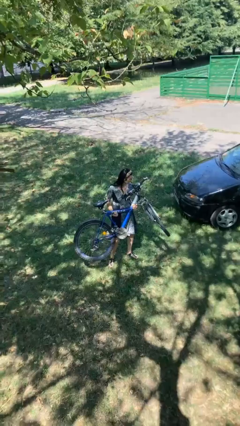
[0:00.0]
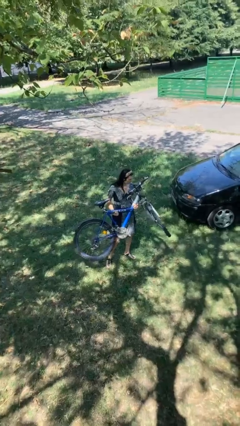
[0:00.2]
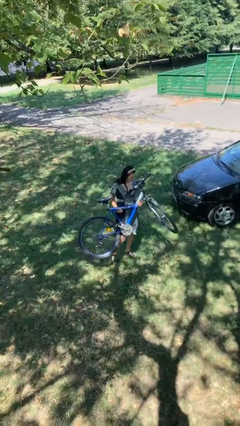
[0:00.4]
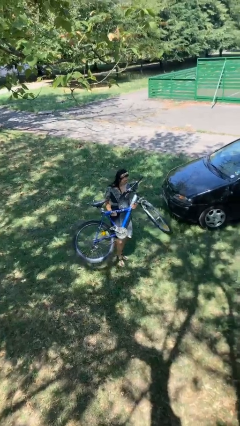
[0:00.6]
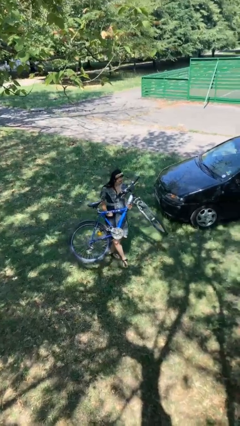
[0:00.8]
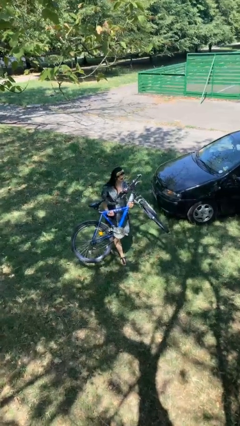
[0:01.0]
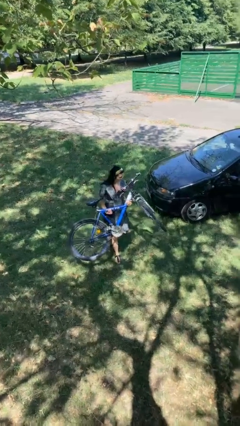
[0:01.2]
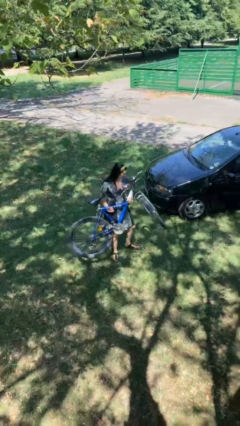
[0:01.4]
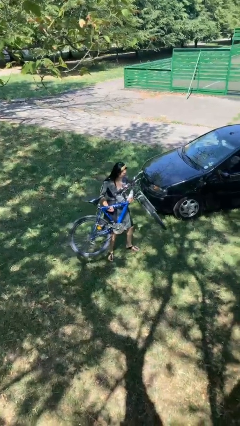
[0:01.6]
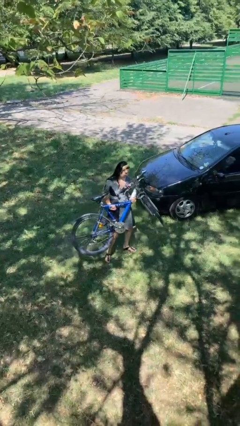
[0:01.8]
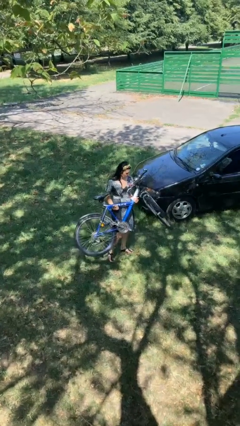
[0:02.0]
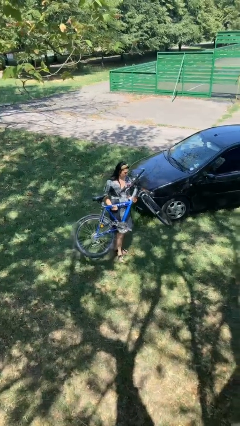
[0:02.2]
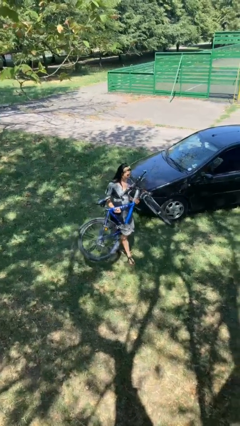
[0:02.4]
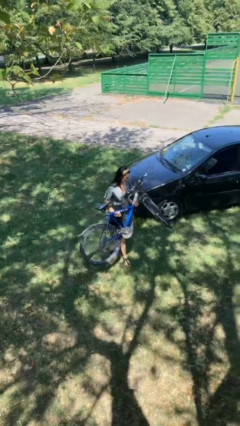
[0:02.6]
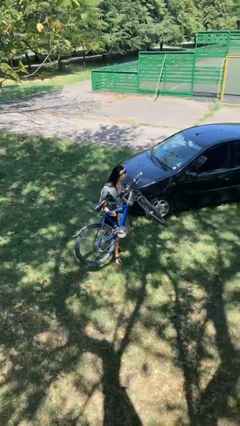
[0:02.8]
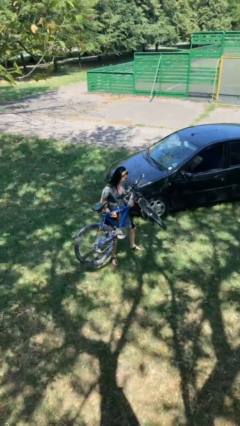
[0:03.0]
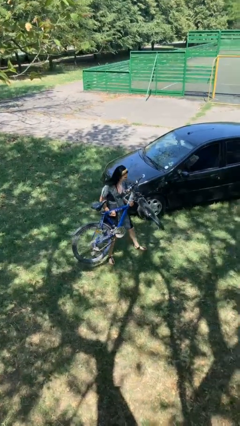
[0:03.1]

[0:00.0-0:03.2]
person carries bicycle

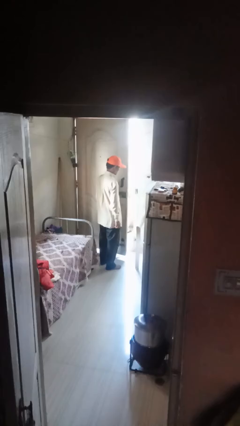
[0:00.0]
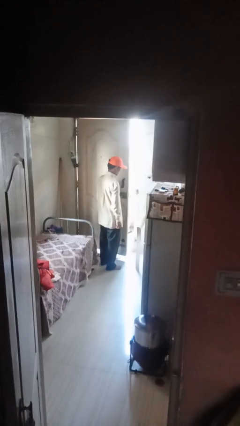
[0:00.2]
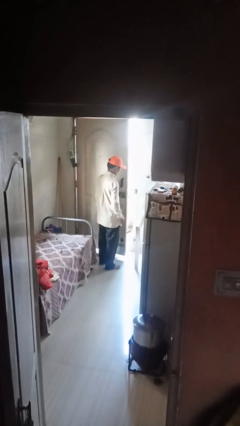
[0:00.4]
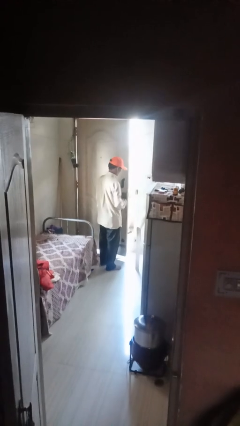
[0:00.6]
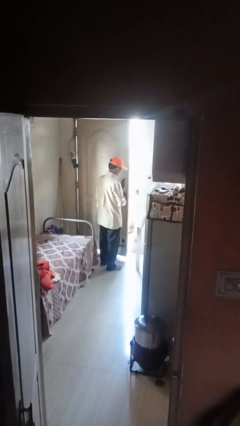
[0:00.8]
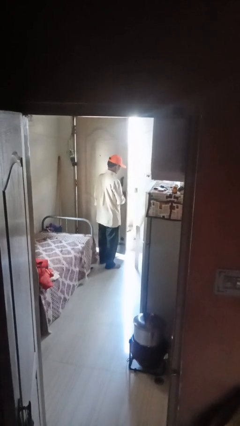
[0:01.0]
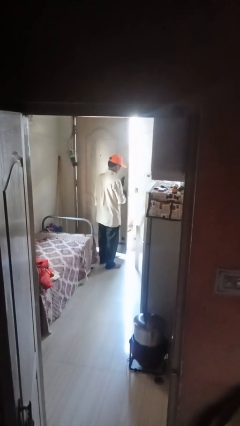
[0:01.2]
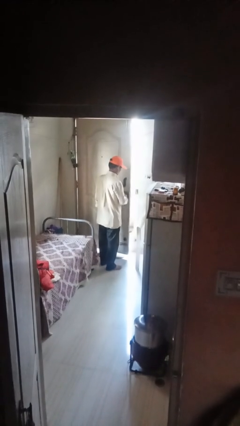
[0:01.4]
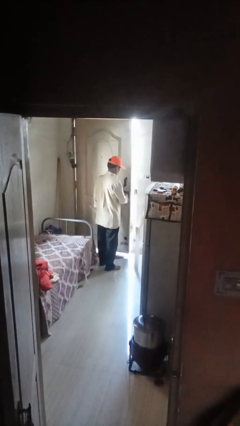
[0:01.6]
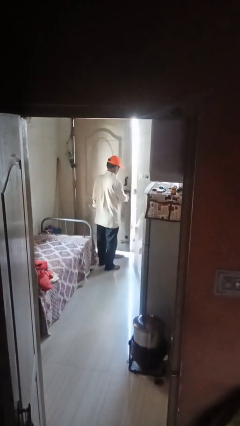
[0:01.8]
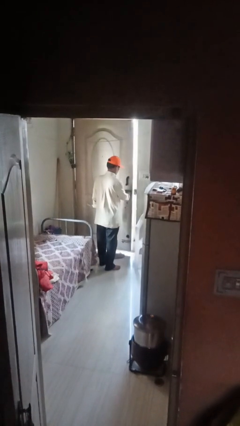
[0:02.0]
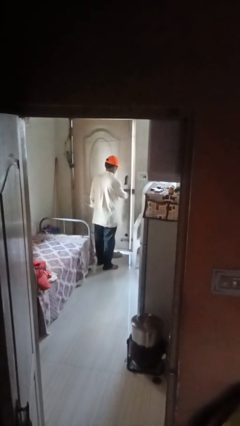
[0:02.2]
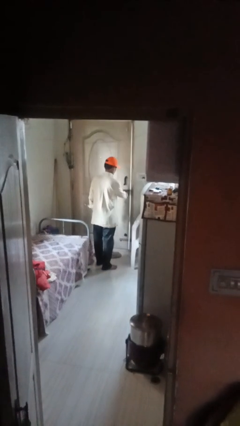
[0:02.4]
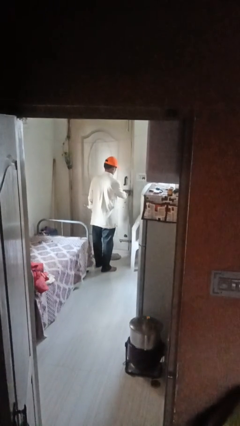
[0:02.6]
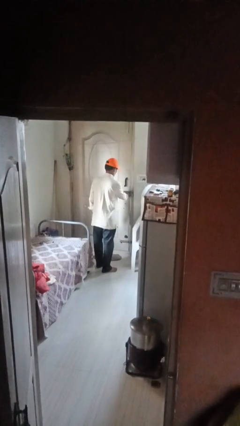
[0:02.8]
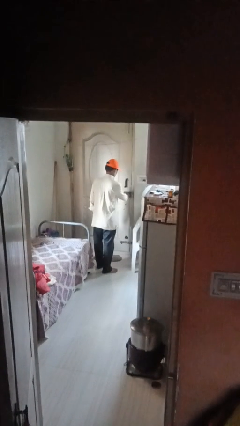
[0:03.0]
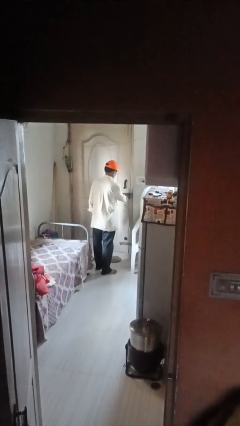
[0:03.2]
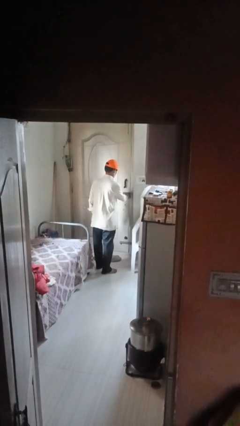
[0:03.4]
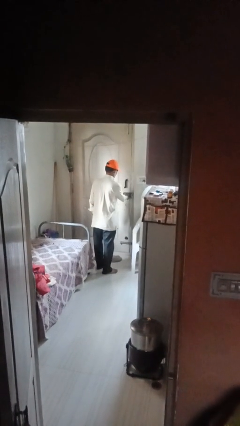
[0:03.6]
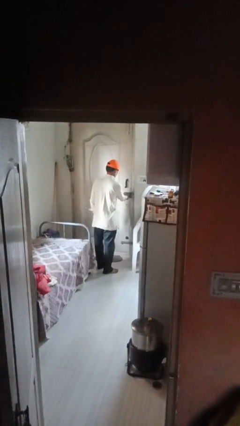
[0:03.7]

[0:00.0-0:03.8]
person closes facility door

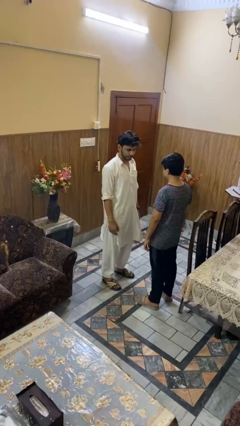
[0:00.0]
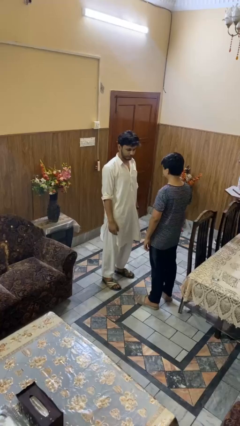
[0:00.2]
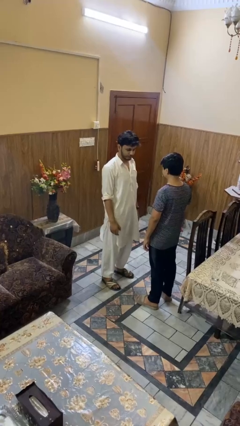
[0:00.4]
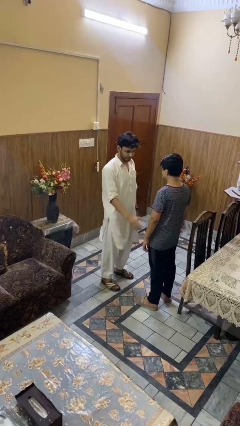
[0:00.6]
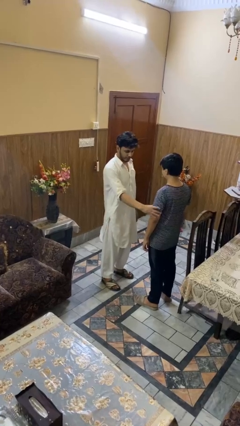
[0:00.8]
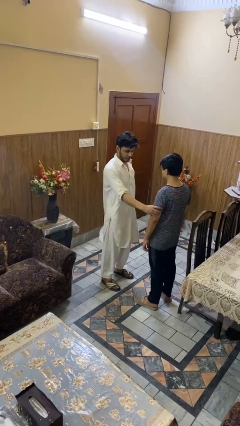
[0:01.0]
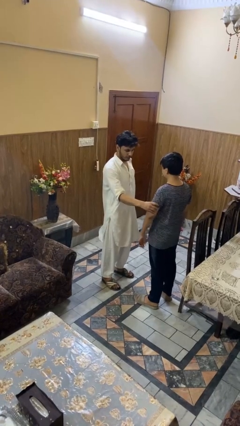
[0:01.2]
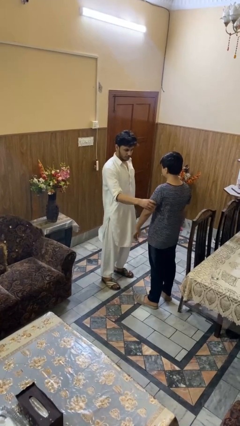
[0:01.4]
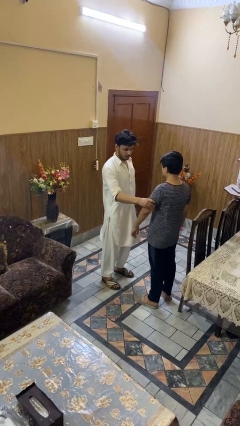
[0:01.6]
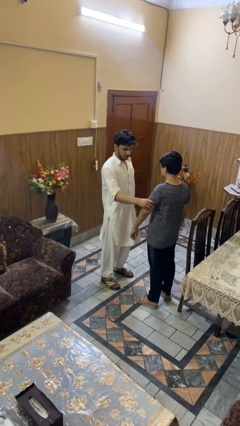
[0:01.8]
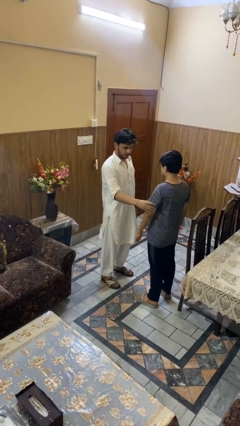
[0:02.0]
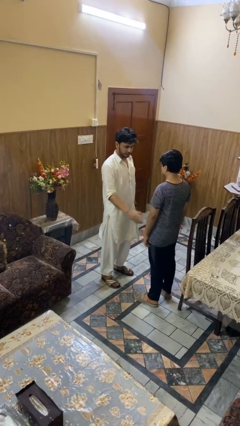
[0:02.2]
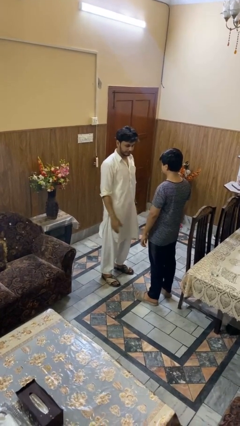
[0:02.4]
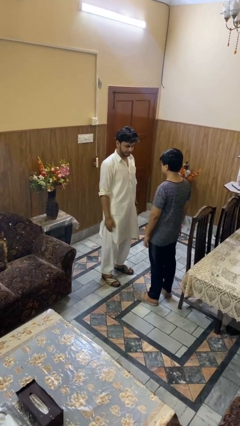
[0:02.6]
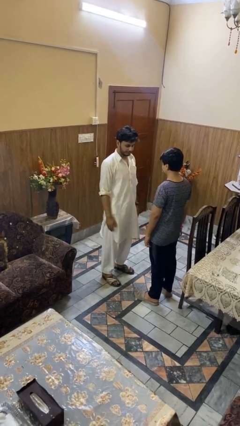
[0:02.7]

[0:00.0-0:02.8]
person grabs person by bicep

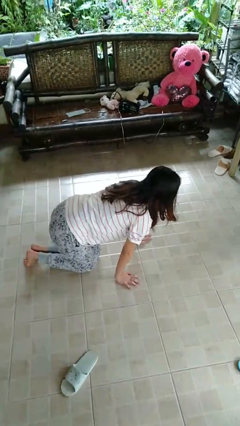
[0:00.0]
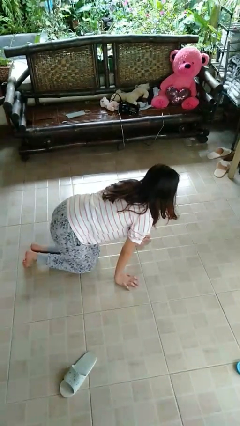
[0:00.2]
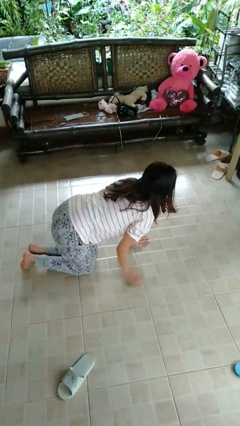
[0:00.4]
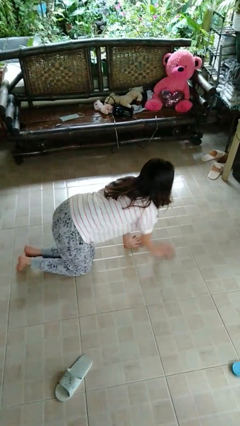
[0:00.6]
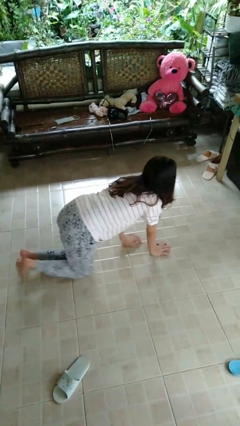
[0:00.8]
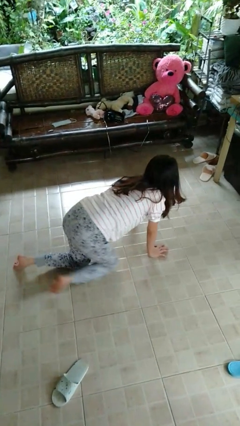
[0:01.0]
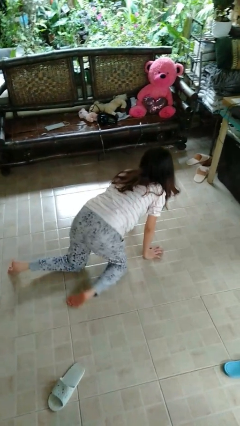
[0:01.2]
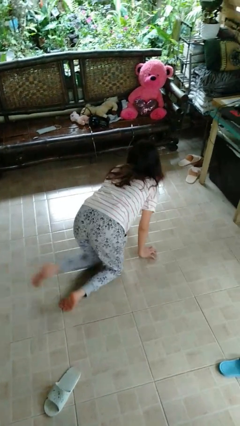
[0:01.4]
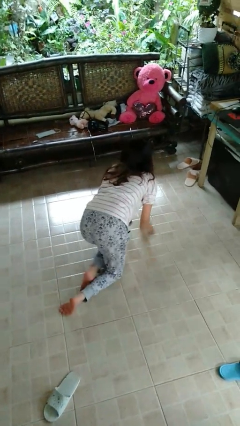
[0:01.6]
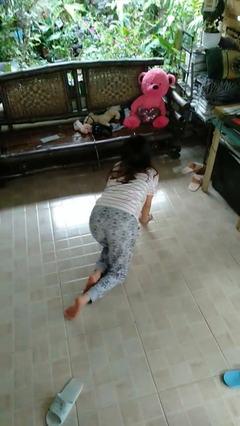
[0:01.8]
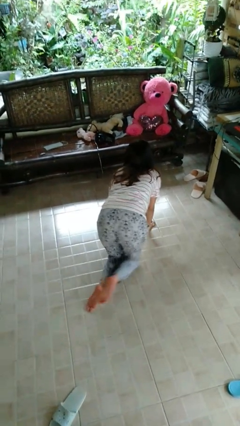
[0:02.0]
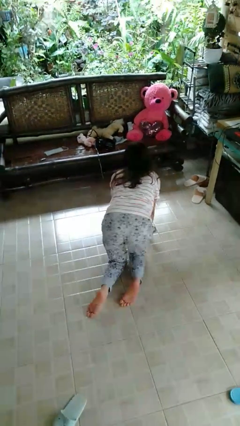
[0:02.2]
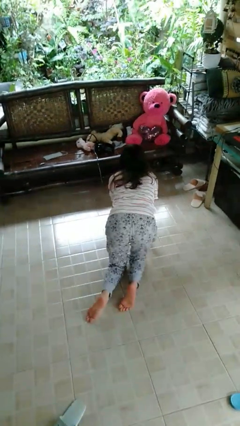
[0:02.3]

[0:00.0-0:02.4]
person crawls

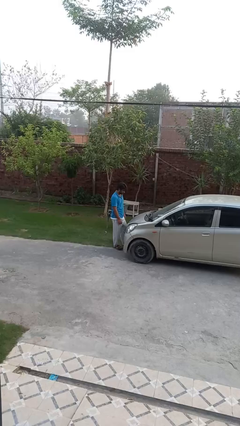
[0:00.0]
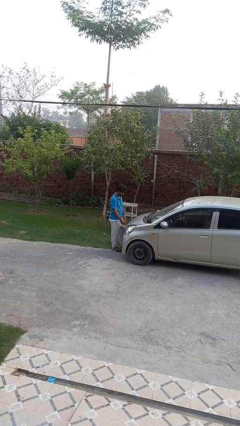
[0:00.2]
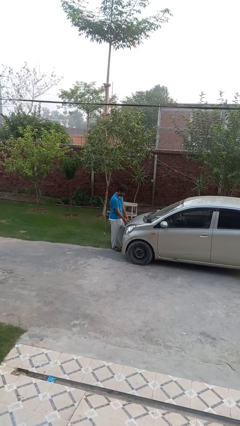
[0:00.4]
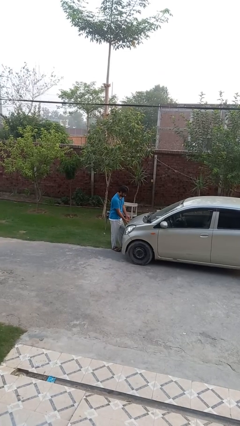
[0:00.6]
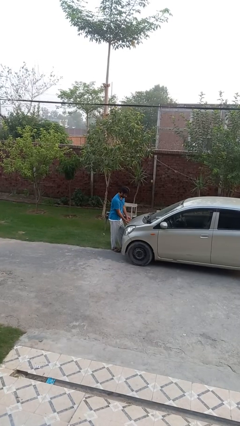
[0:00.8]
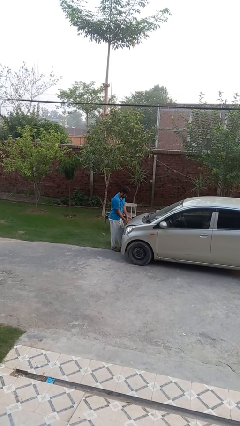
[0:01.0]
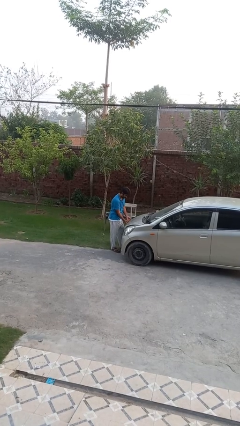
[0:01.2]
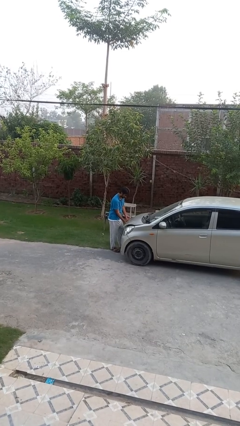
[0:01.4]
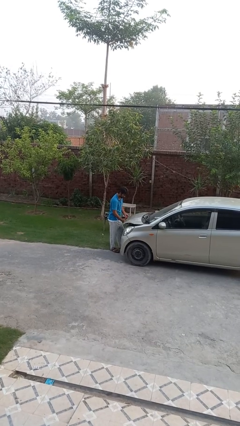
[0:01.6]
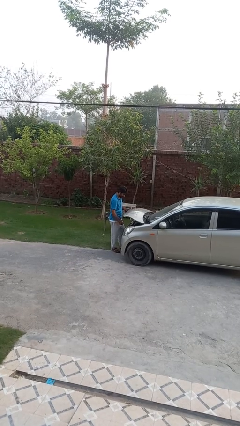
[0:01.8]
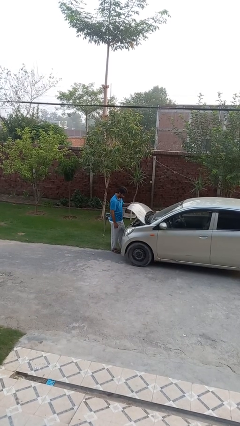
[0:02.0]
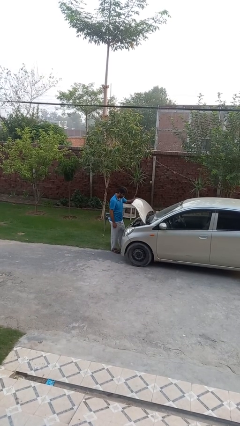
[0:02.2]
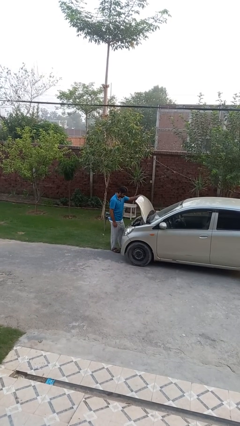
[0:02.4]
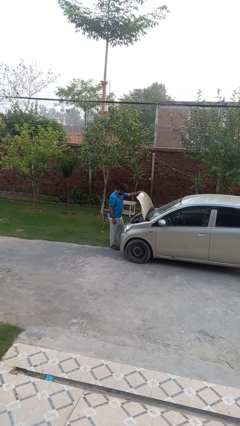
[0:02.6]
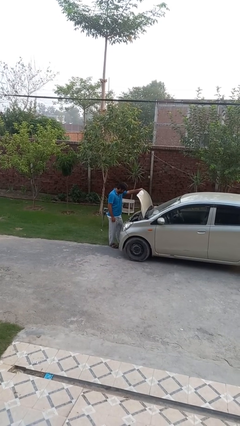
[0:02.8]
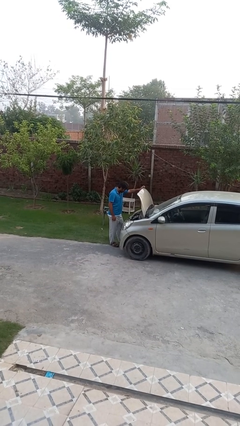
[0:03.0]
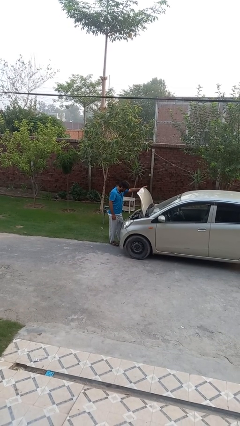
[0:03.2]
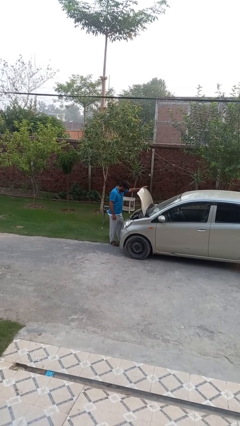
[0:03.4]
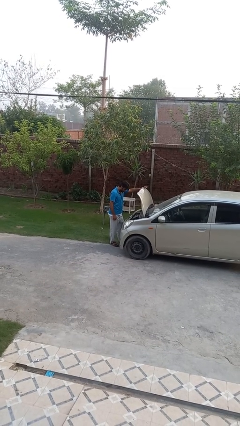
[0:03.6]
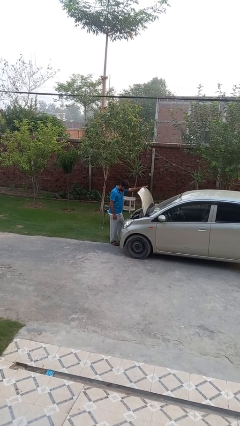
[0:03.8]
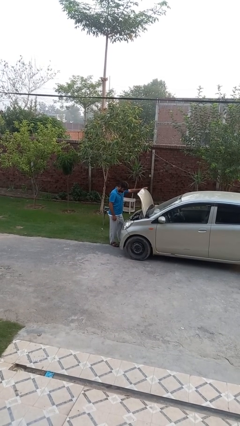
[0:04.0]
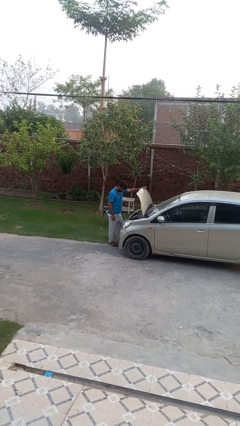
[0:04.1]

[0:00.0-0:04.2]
person opens car hood

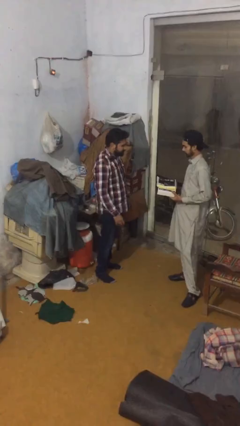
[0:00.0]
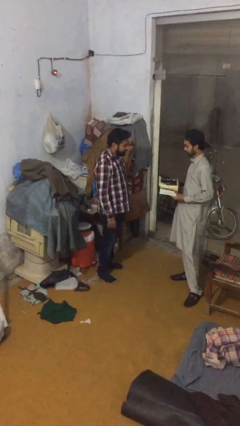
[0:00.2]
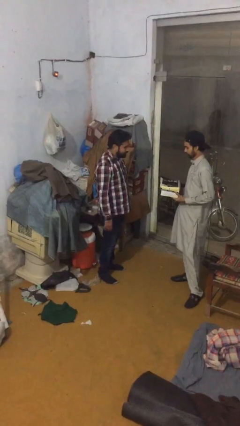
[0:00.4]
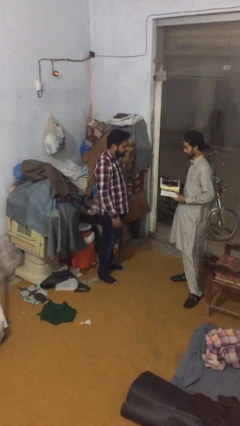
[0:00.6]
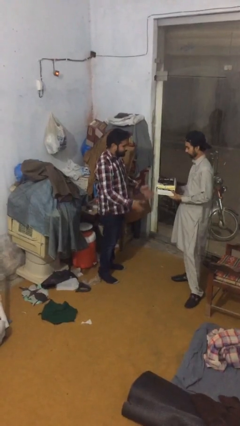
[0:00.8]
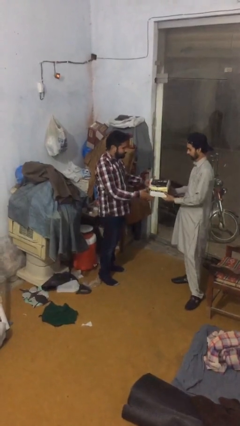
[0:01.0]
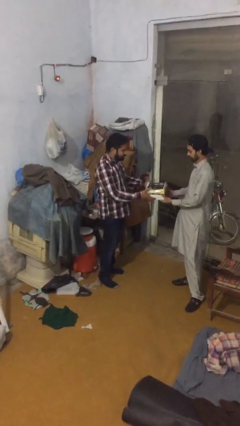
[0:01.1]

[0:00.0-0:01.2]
person transfers object to person

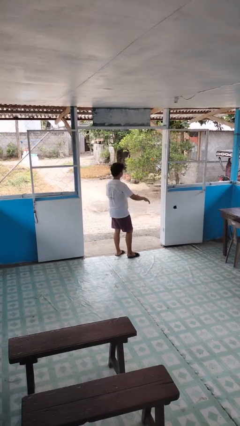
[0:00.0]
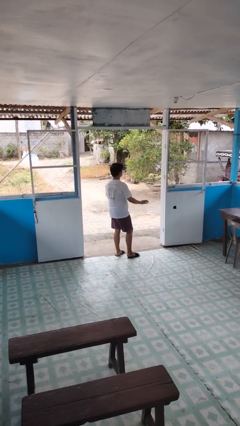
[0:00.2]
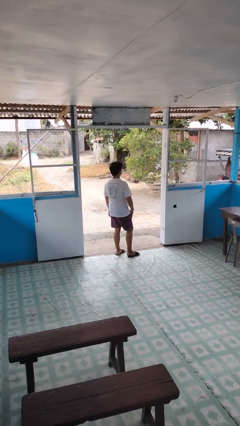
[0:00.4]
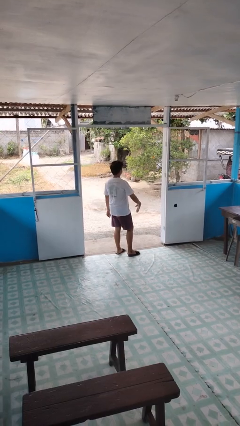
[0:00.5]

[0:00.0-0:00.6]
person slaps hands on thighs
